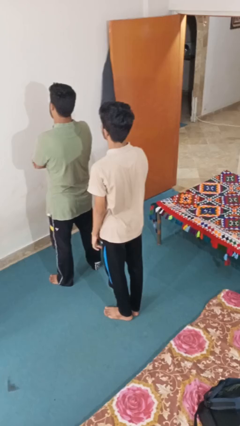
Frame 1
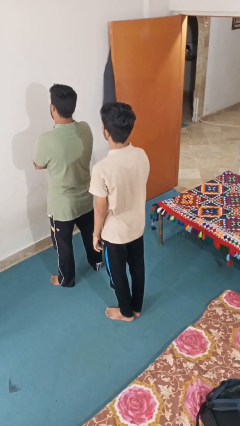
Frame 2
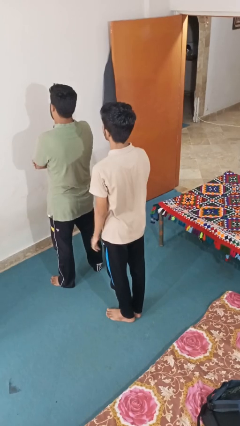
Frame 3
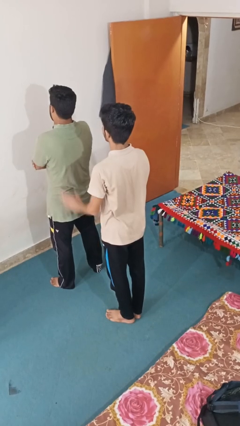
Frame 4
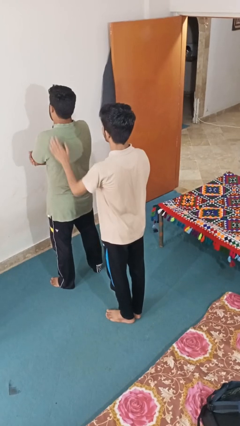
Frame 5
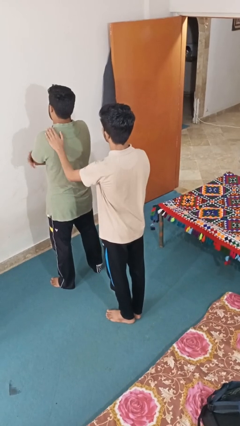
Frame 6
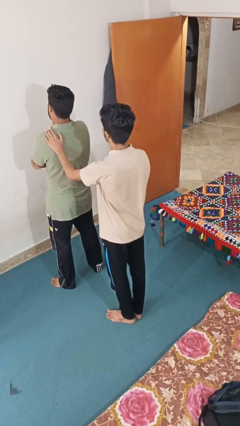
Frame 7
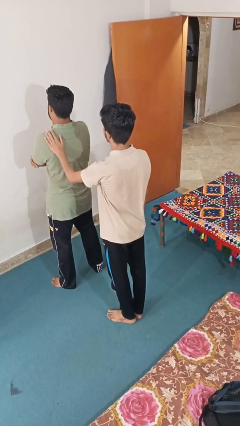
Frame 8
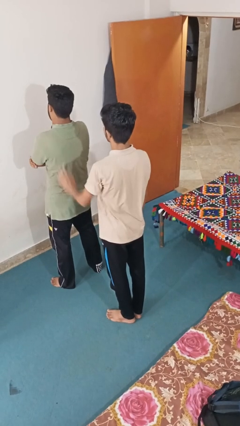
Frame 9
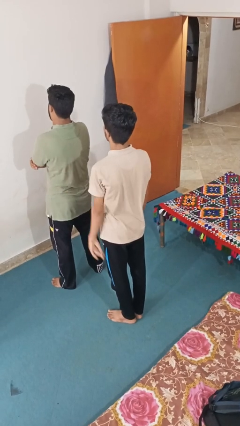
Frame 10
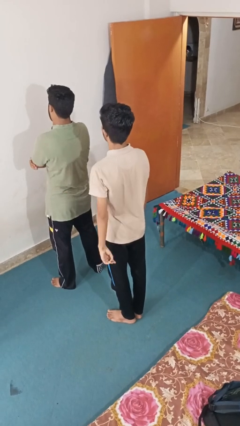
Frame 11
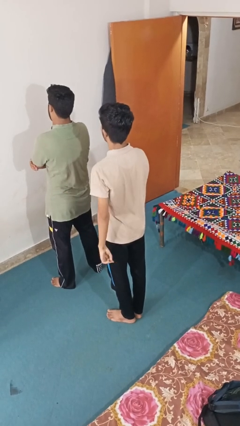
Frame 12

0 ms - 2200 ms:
person touches back of person

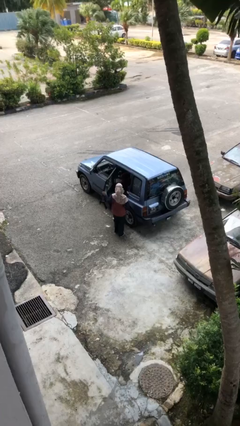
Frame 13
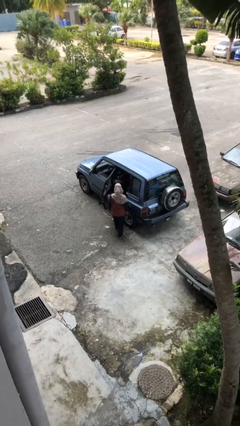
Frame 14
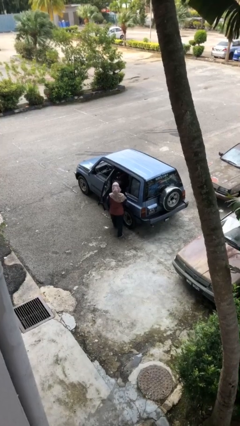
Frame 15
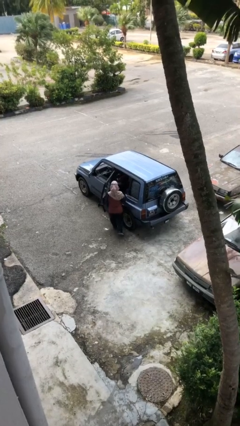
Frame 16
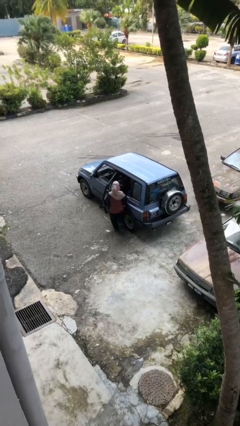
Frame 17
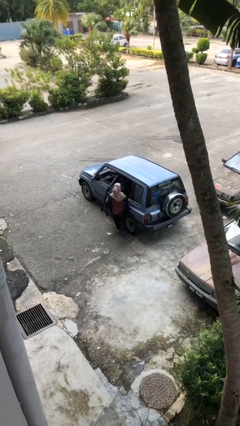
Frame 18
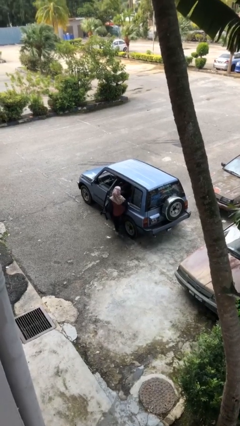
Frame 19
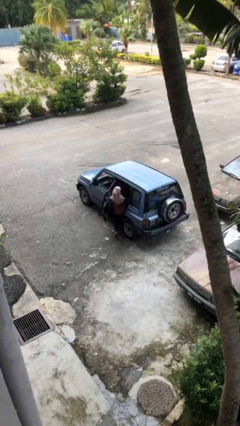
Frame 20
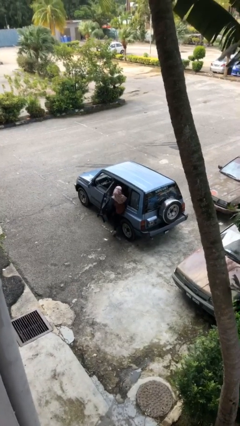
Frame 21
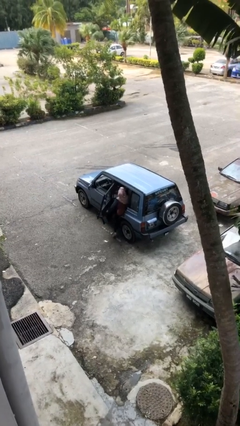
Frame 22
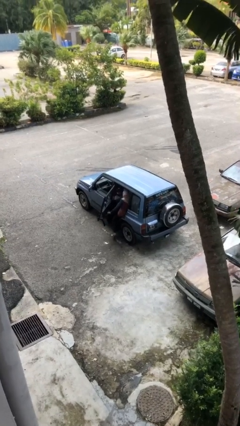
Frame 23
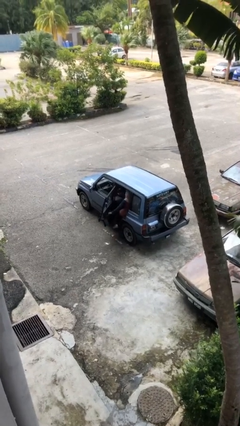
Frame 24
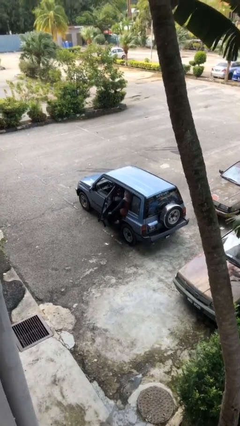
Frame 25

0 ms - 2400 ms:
person enters car

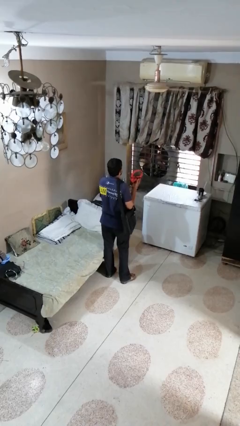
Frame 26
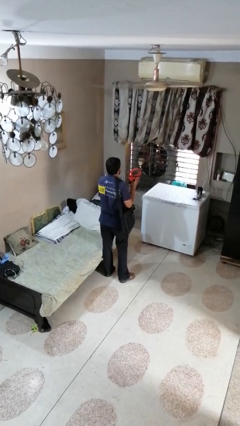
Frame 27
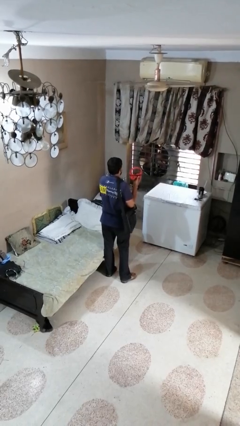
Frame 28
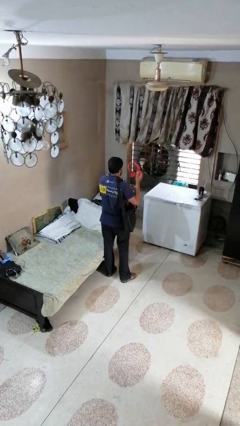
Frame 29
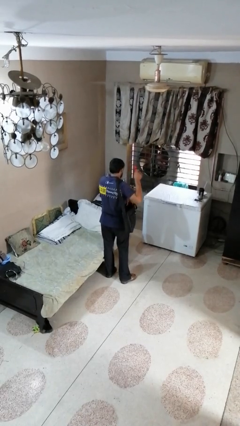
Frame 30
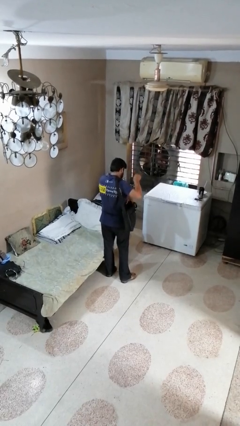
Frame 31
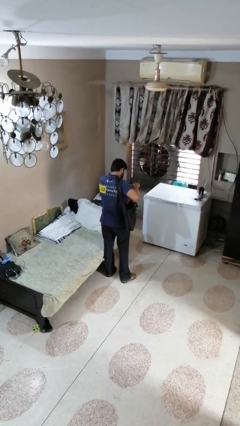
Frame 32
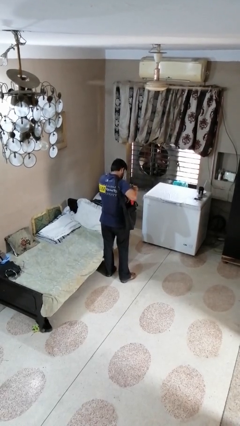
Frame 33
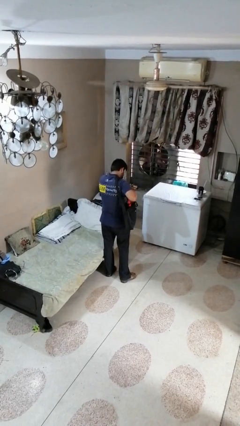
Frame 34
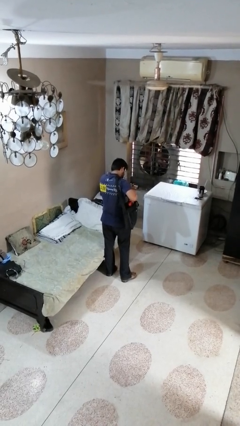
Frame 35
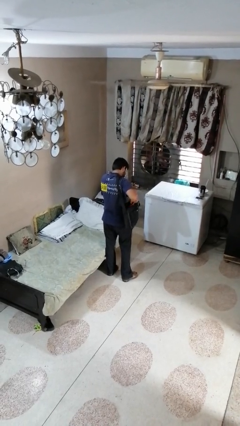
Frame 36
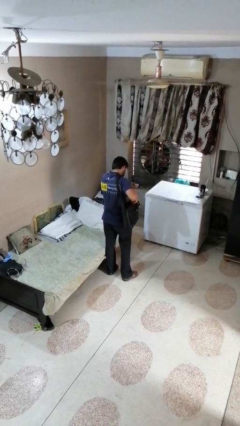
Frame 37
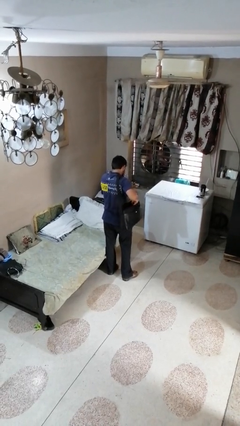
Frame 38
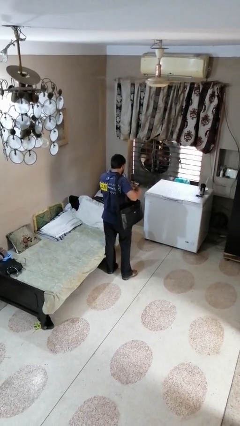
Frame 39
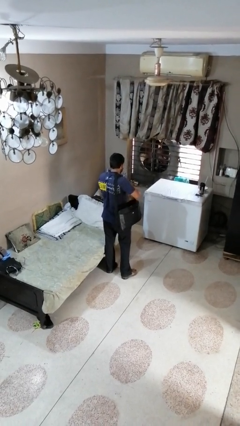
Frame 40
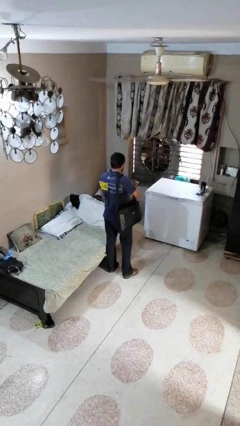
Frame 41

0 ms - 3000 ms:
person puts object into backpack

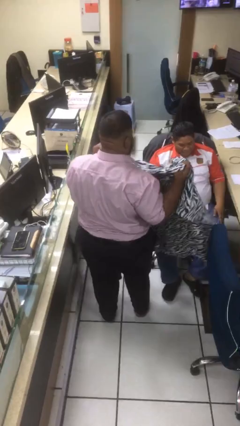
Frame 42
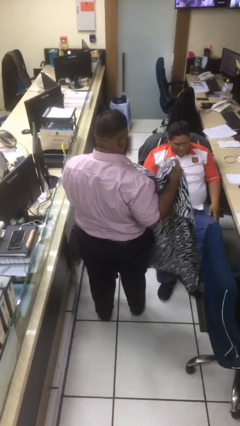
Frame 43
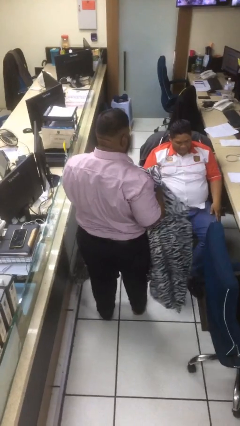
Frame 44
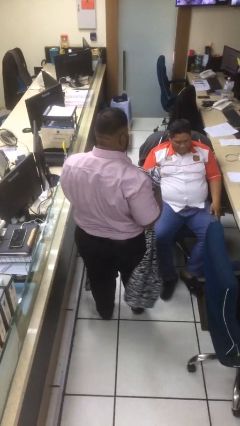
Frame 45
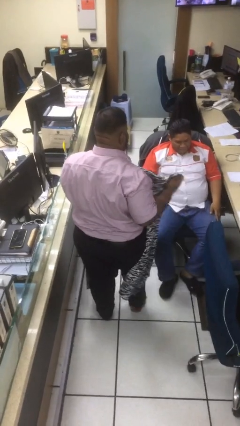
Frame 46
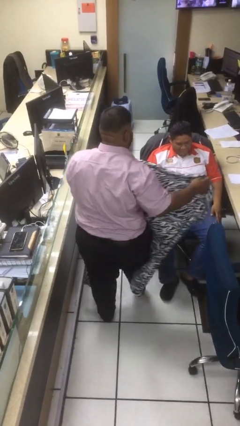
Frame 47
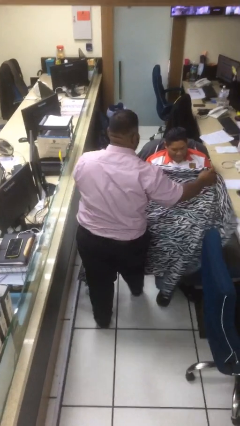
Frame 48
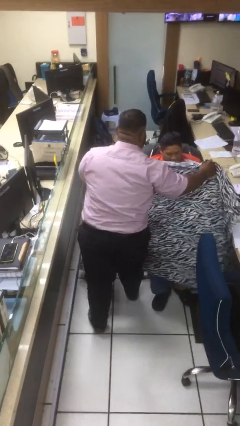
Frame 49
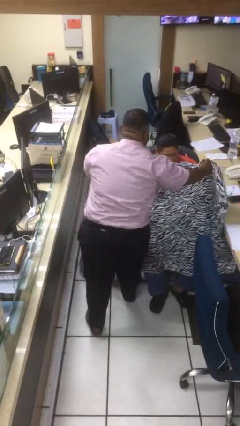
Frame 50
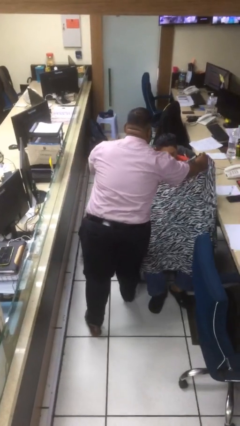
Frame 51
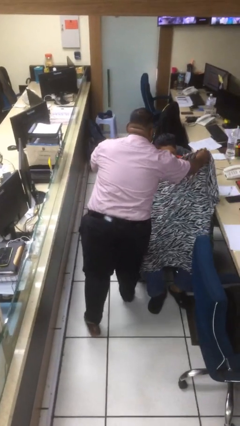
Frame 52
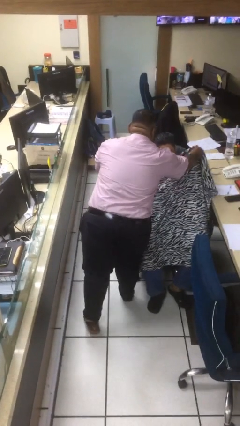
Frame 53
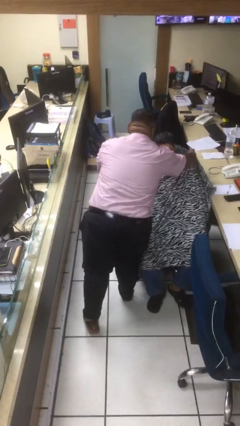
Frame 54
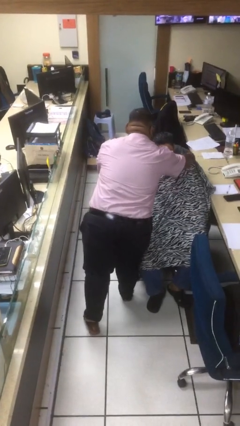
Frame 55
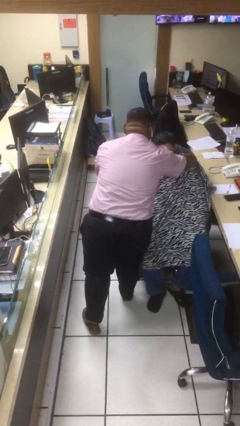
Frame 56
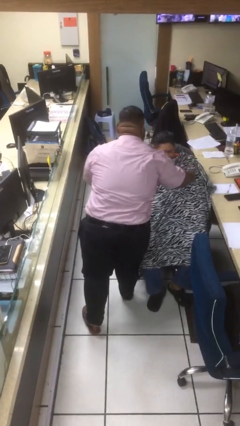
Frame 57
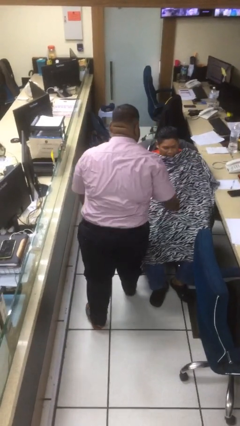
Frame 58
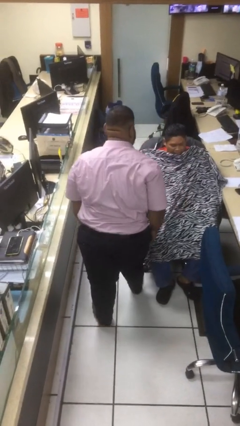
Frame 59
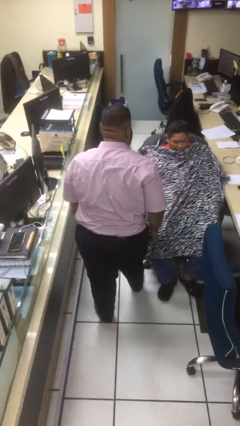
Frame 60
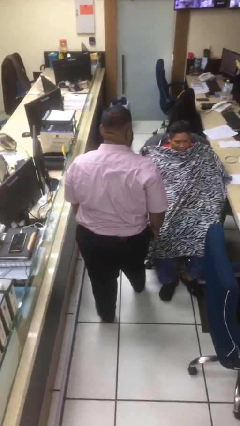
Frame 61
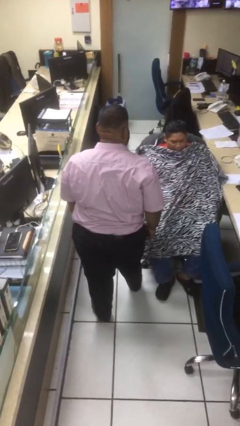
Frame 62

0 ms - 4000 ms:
person covers friend with blanket

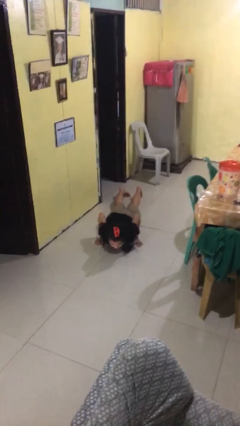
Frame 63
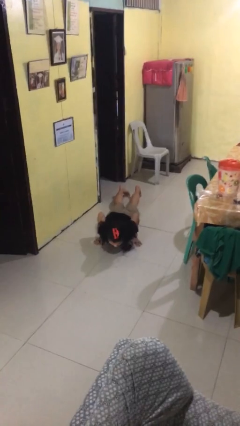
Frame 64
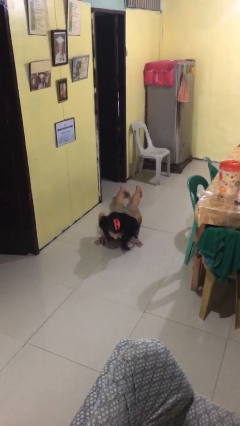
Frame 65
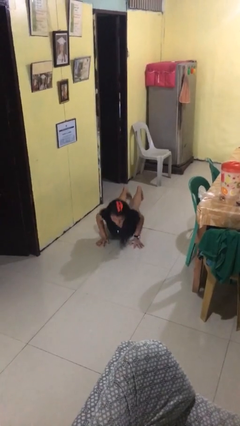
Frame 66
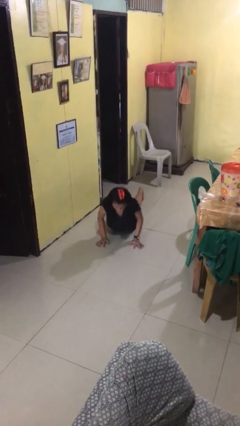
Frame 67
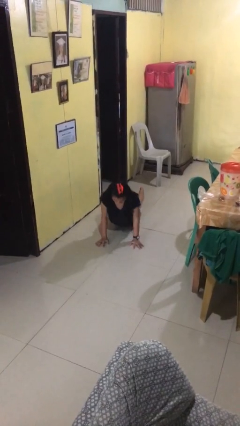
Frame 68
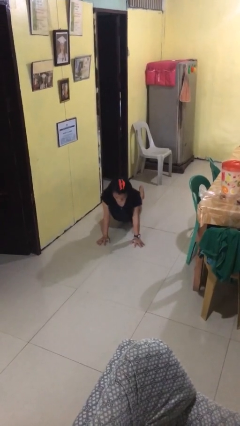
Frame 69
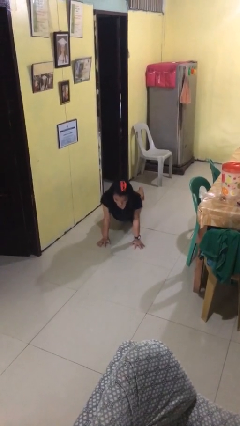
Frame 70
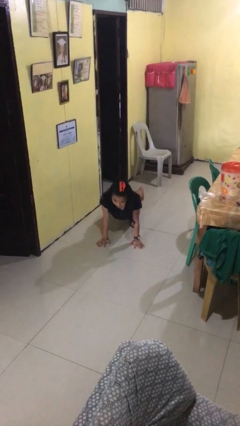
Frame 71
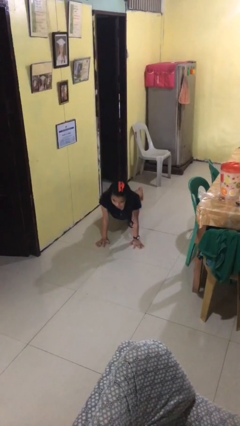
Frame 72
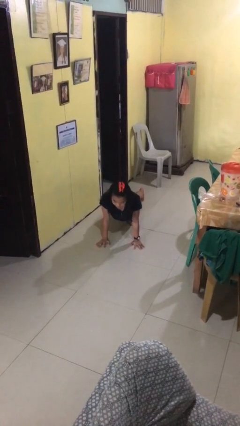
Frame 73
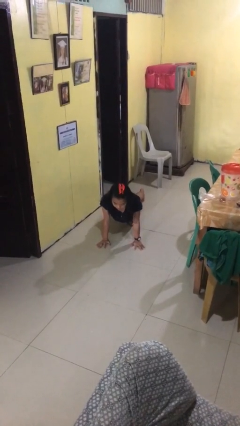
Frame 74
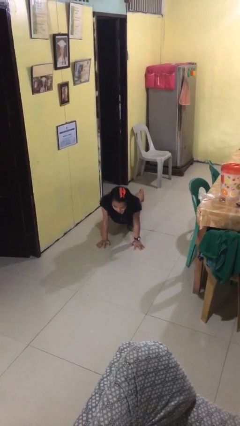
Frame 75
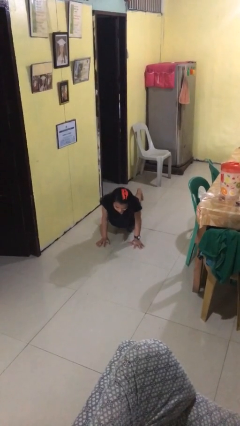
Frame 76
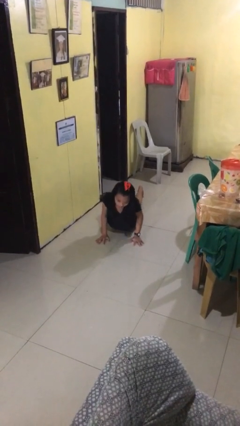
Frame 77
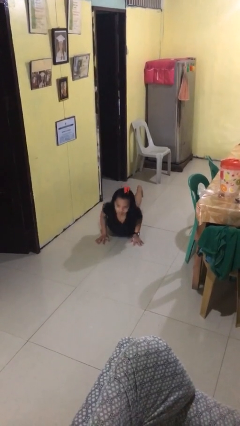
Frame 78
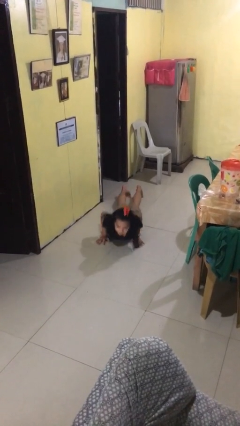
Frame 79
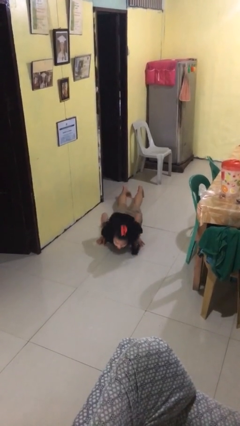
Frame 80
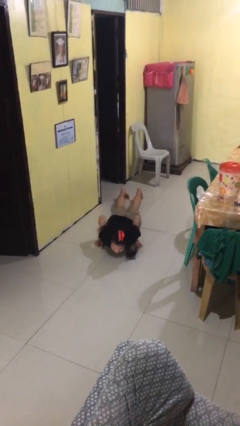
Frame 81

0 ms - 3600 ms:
person exercises with pushup

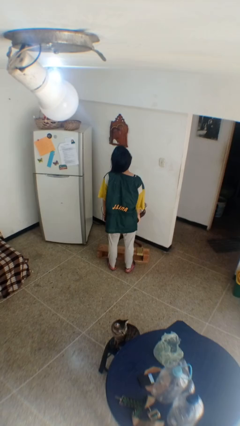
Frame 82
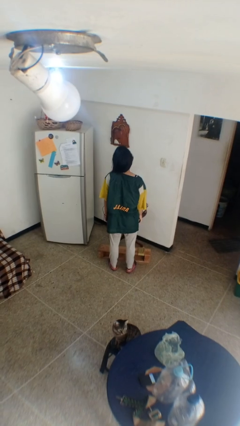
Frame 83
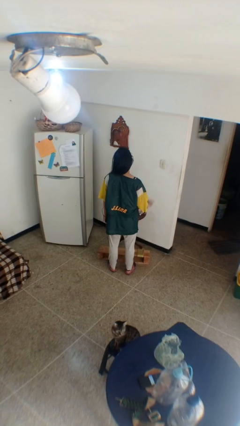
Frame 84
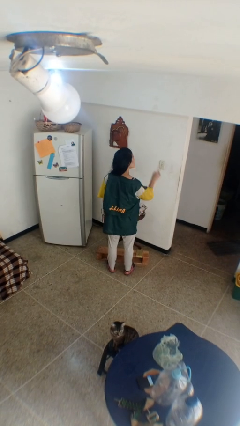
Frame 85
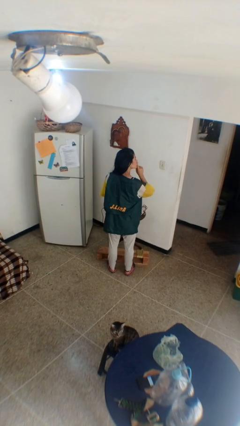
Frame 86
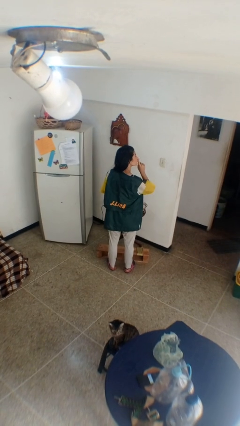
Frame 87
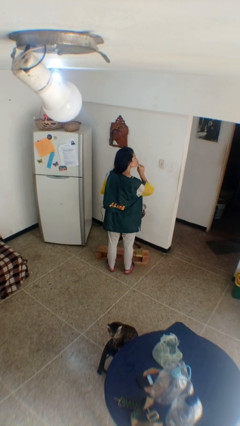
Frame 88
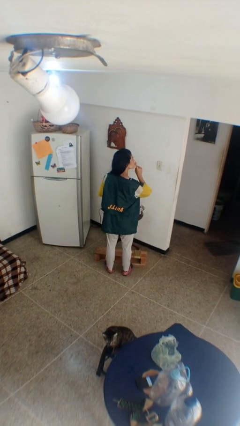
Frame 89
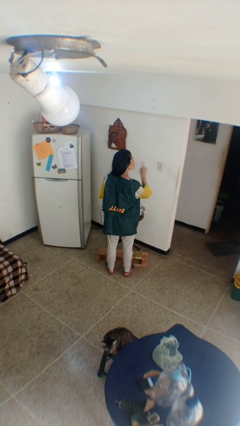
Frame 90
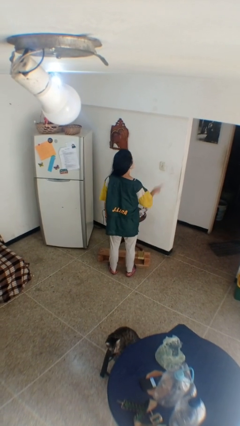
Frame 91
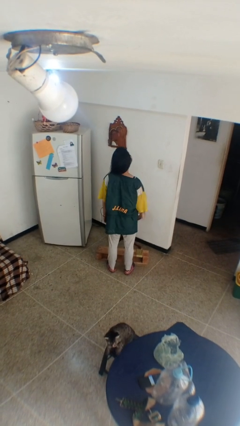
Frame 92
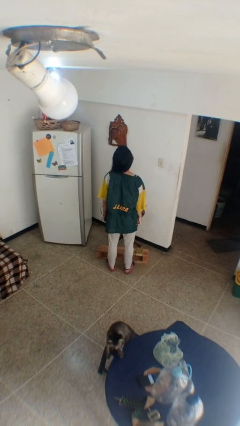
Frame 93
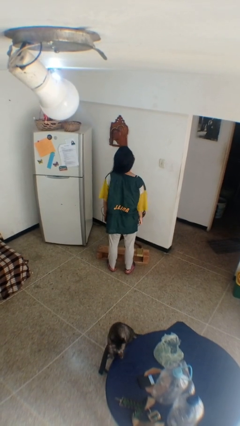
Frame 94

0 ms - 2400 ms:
person gestures be quiet
